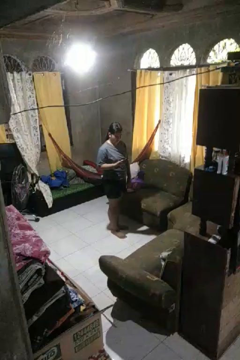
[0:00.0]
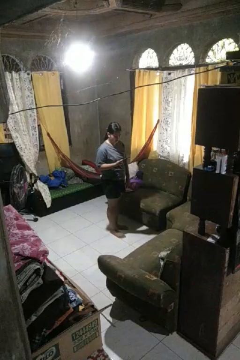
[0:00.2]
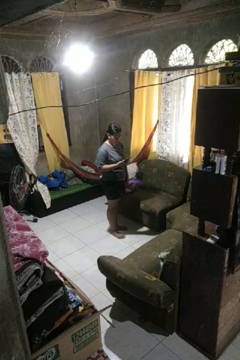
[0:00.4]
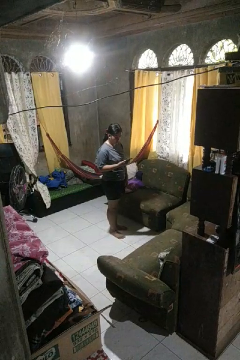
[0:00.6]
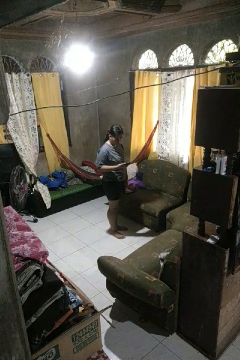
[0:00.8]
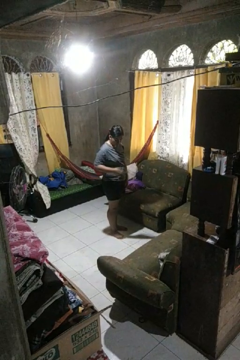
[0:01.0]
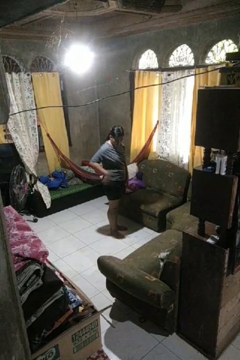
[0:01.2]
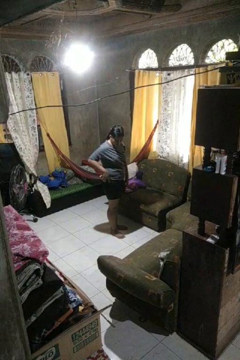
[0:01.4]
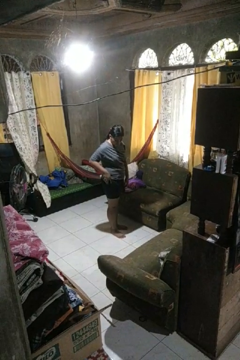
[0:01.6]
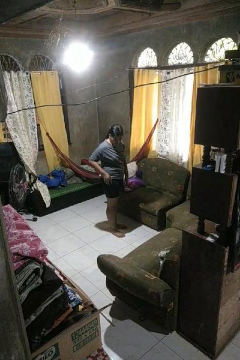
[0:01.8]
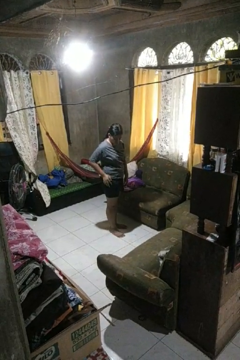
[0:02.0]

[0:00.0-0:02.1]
person puts phone into pocket

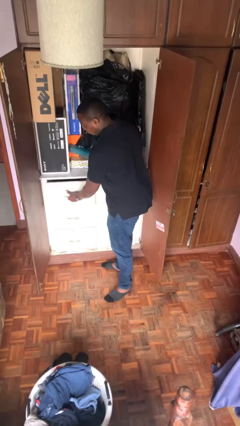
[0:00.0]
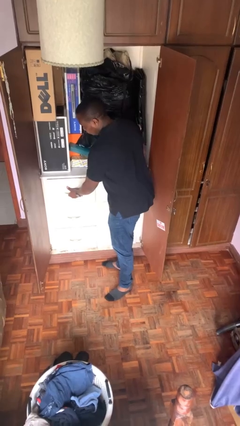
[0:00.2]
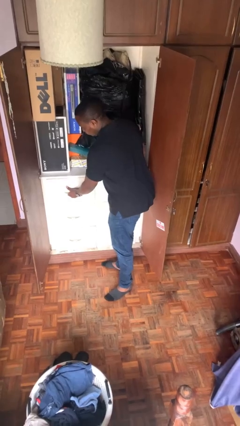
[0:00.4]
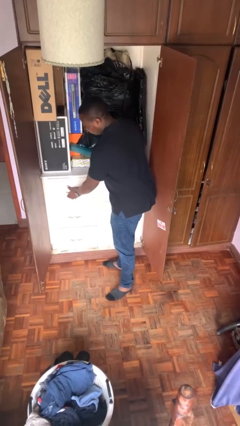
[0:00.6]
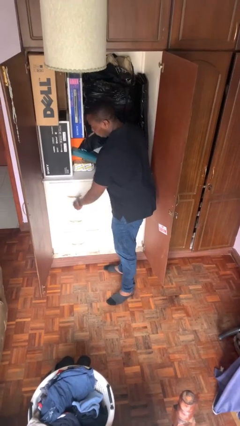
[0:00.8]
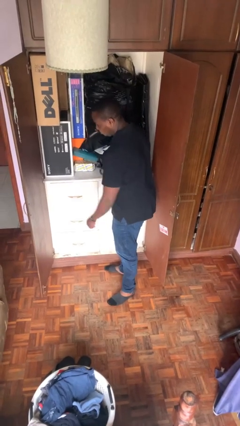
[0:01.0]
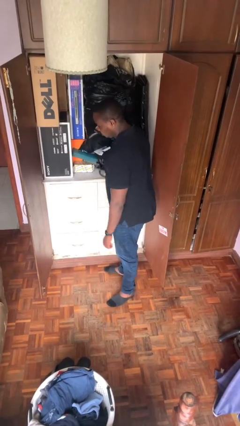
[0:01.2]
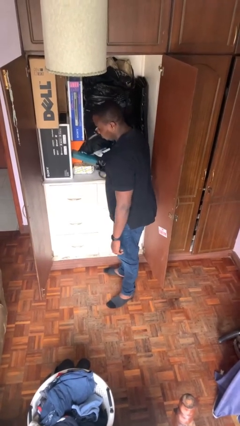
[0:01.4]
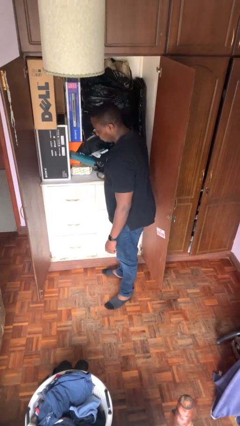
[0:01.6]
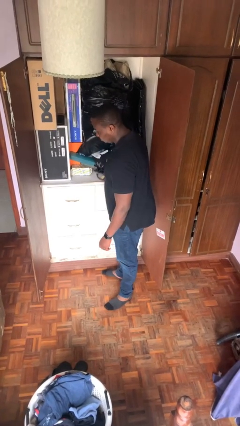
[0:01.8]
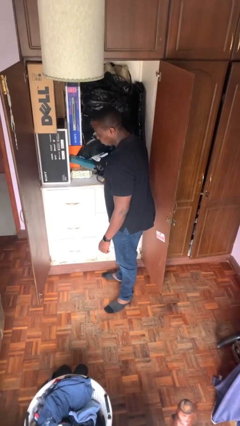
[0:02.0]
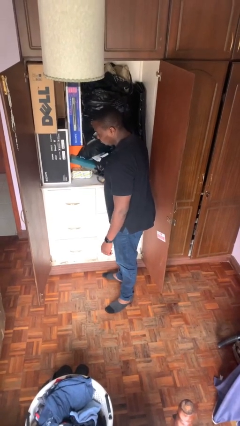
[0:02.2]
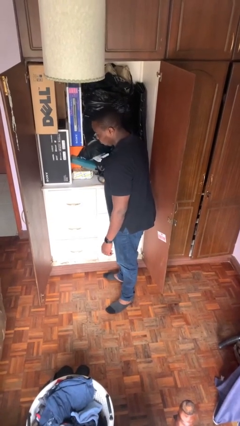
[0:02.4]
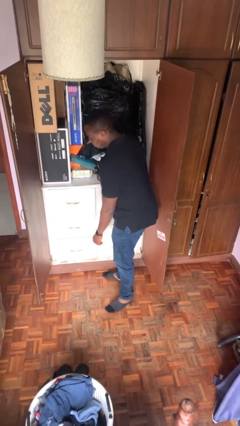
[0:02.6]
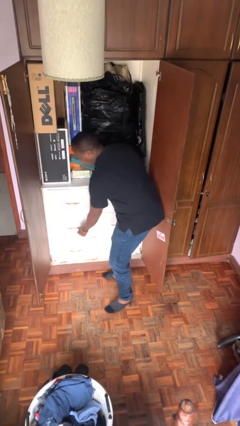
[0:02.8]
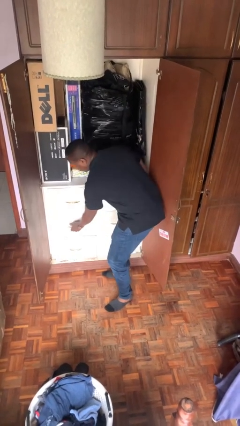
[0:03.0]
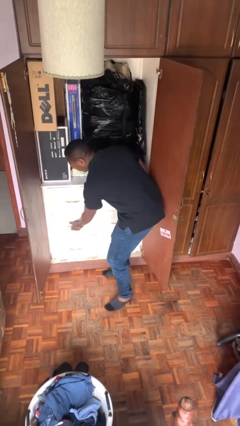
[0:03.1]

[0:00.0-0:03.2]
person closes dresser drawer

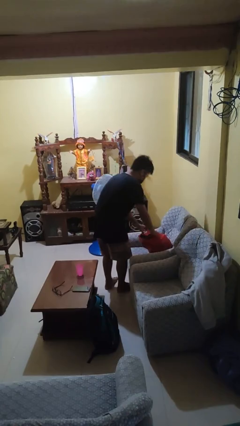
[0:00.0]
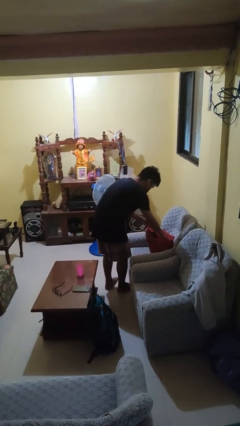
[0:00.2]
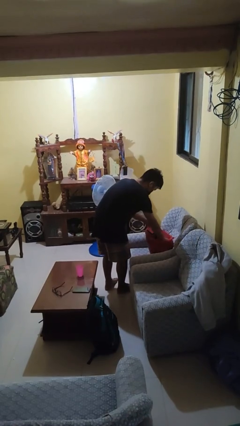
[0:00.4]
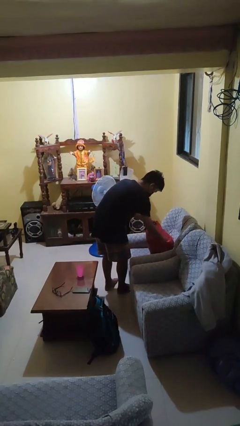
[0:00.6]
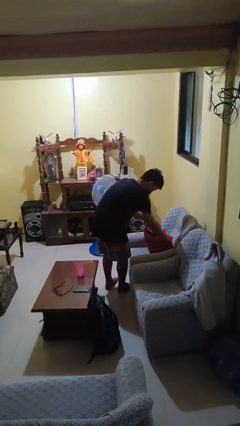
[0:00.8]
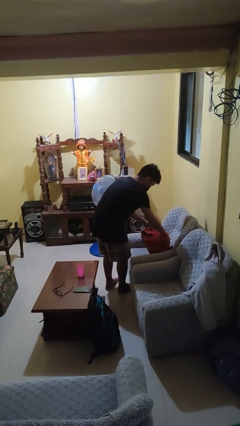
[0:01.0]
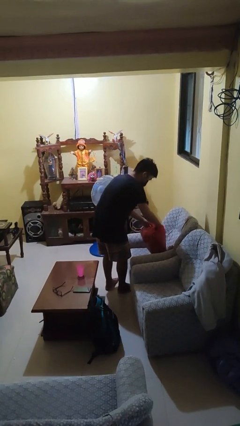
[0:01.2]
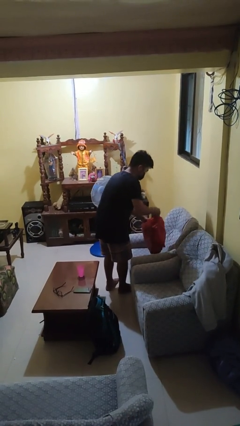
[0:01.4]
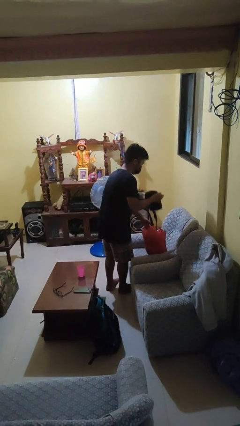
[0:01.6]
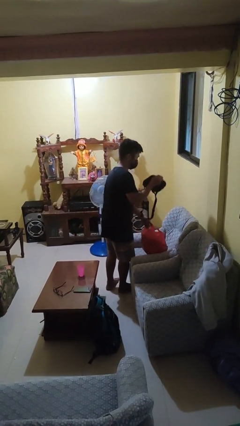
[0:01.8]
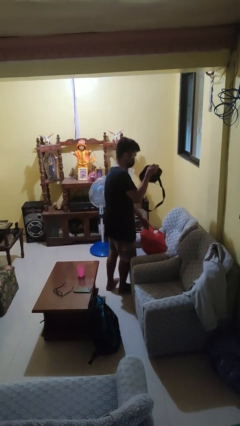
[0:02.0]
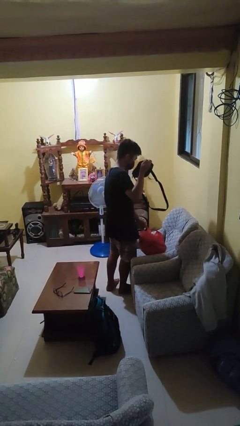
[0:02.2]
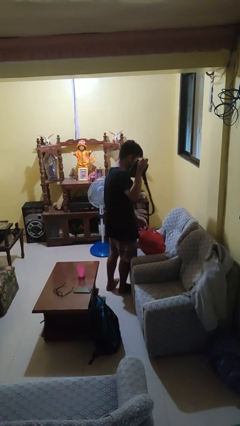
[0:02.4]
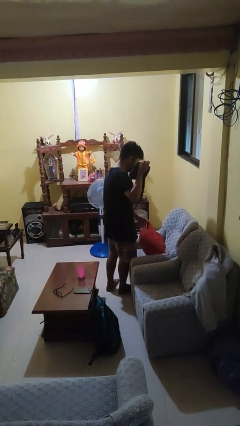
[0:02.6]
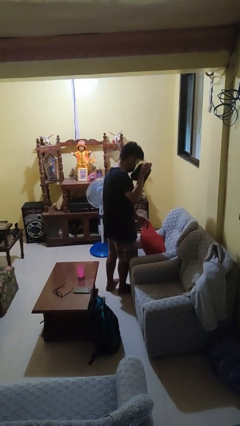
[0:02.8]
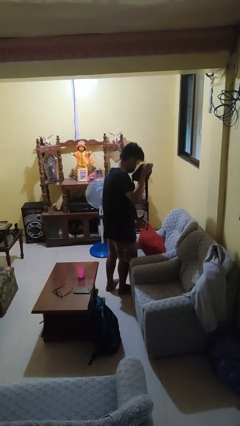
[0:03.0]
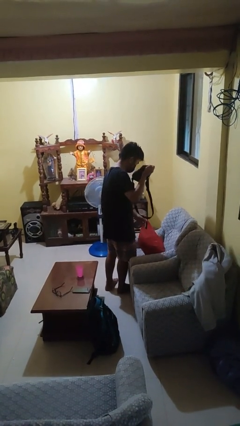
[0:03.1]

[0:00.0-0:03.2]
person takes object from bag

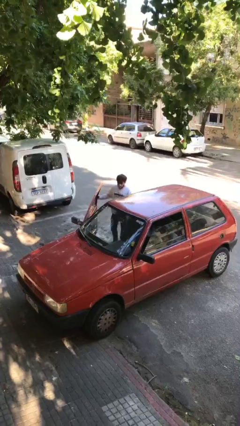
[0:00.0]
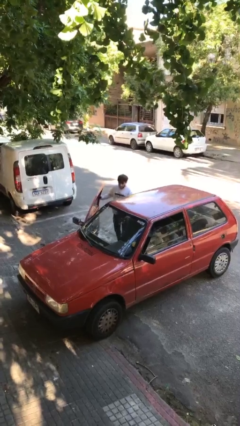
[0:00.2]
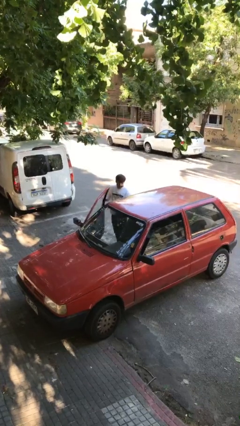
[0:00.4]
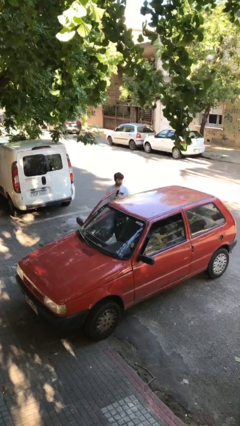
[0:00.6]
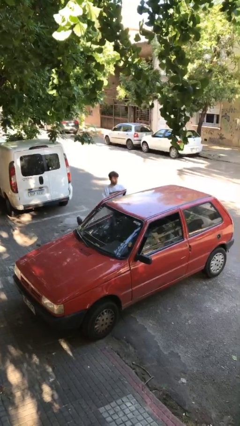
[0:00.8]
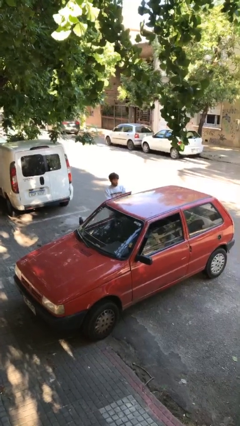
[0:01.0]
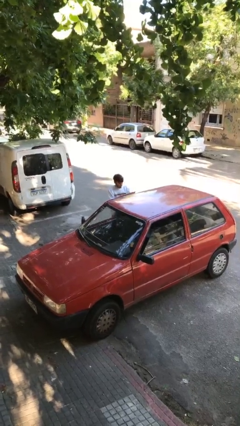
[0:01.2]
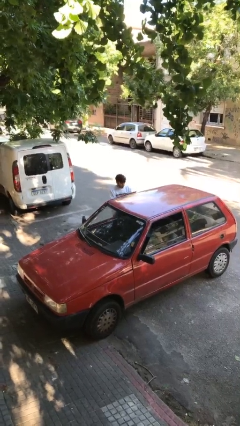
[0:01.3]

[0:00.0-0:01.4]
person closes car door

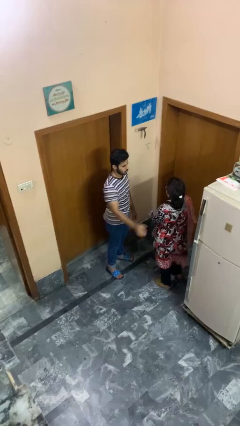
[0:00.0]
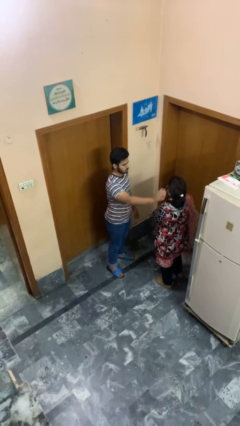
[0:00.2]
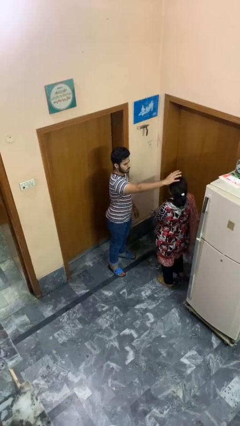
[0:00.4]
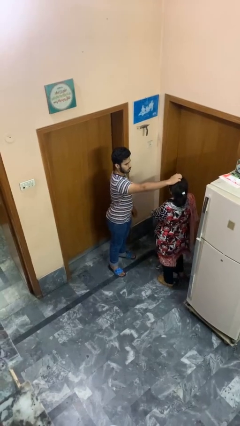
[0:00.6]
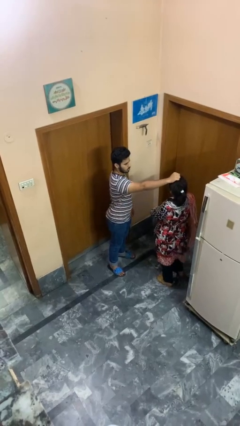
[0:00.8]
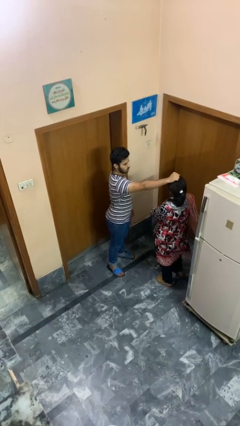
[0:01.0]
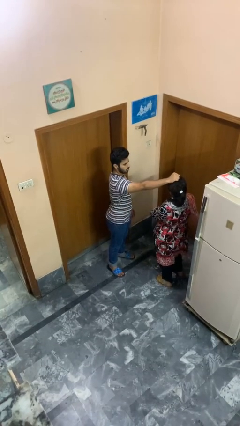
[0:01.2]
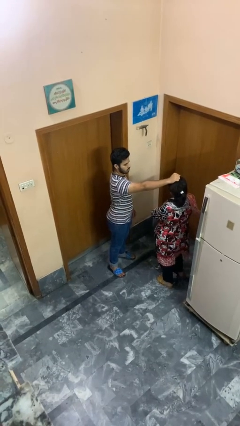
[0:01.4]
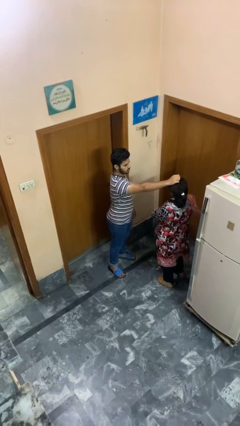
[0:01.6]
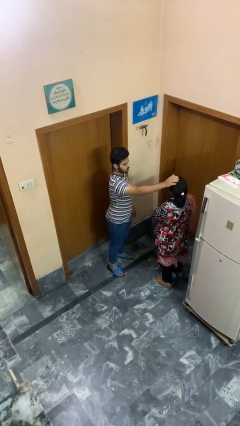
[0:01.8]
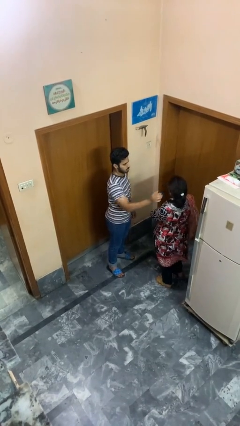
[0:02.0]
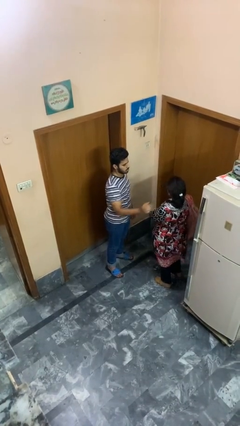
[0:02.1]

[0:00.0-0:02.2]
person grabs person by hair

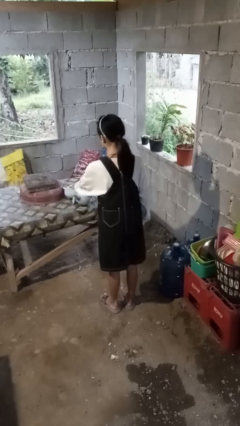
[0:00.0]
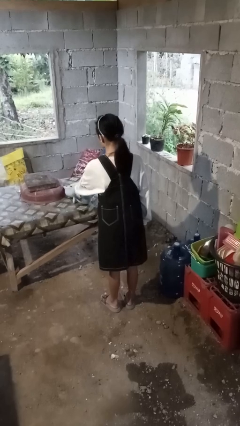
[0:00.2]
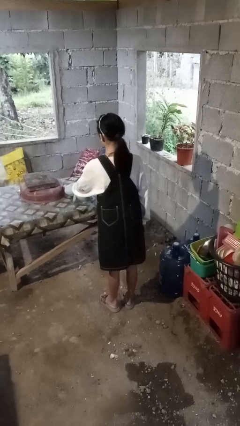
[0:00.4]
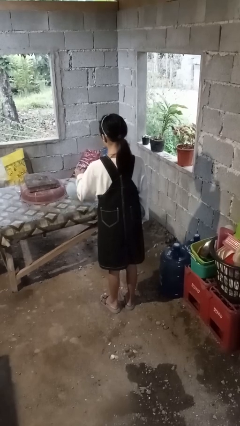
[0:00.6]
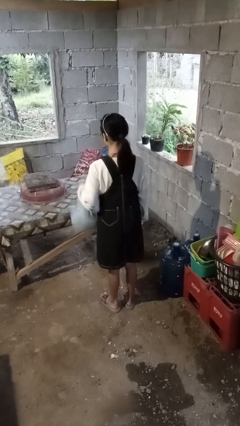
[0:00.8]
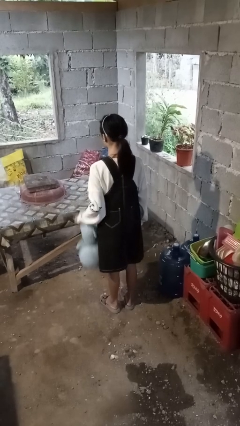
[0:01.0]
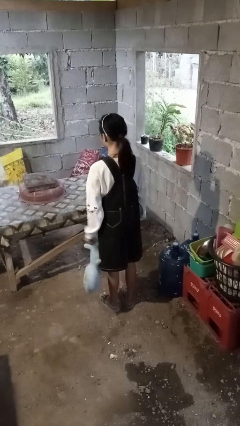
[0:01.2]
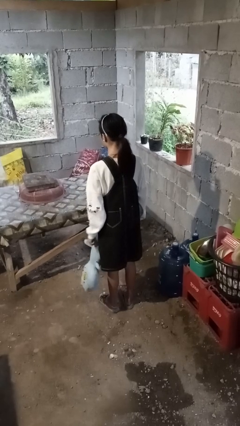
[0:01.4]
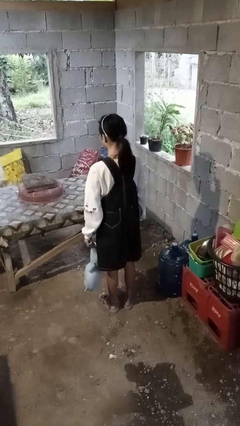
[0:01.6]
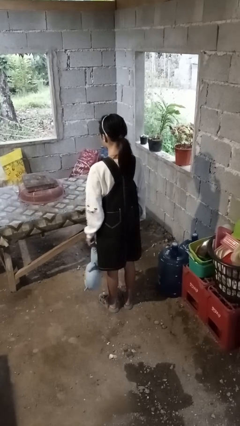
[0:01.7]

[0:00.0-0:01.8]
person picks up object from table

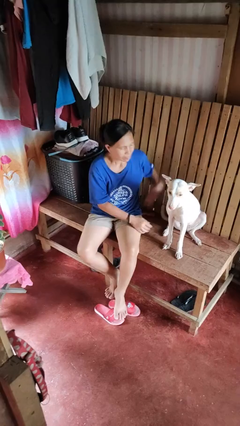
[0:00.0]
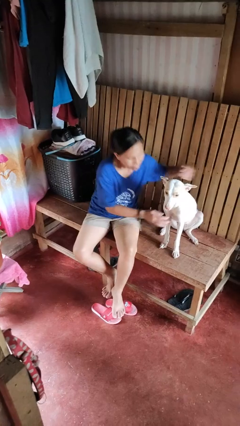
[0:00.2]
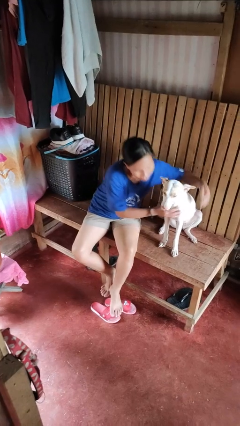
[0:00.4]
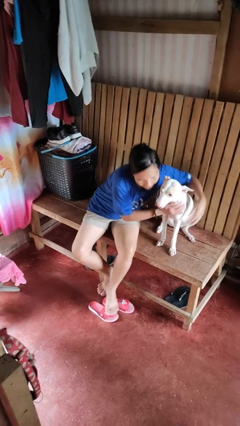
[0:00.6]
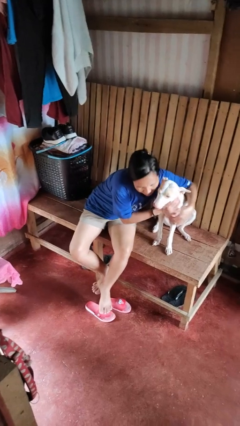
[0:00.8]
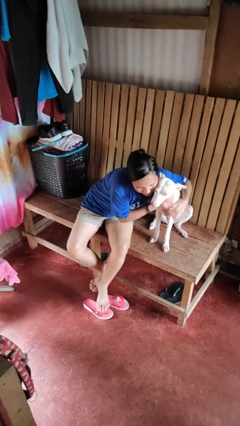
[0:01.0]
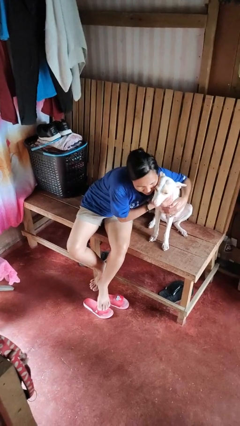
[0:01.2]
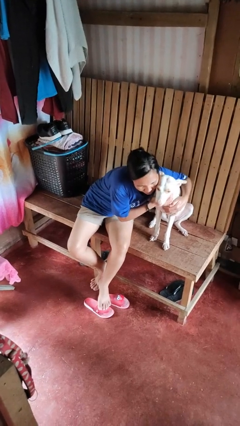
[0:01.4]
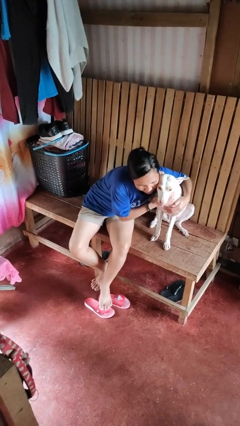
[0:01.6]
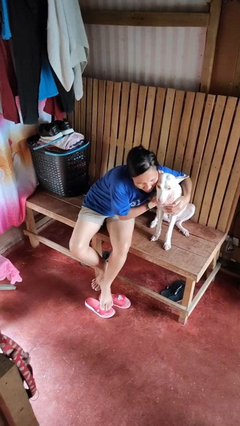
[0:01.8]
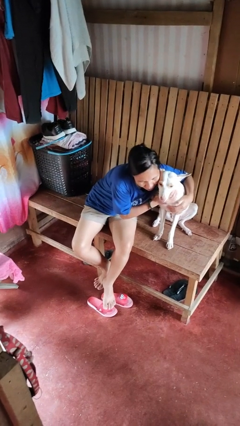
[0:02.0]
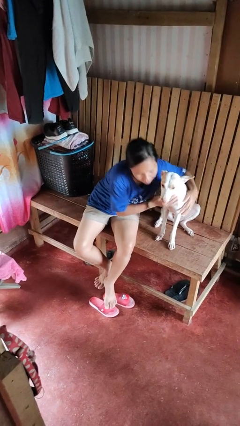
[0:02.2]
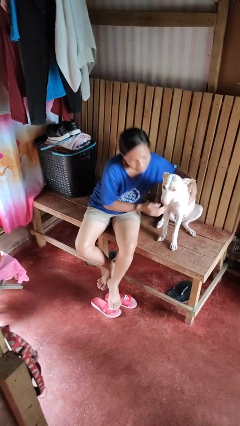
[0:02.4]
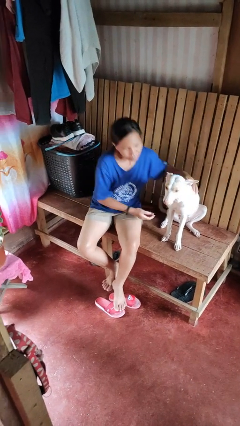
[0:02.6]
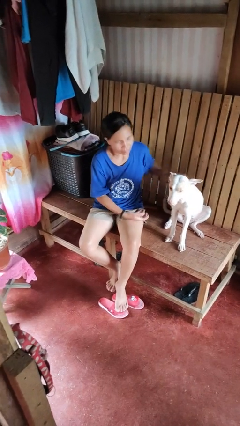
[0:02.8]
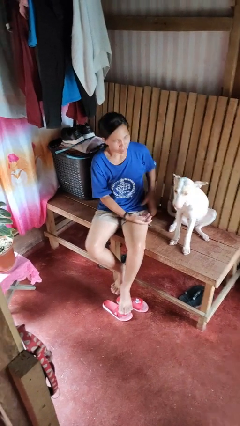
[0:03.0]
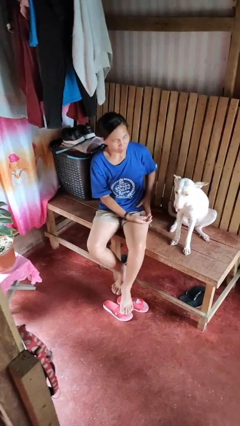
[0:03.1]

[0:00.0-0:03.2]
person hugs dog

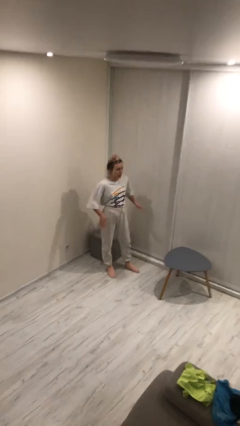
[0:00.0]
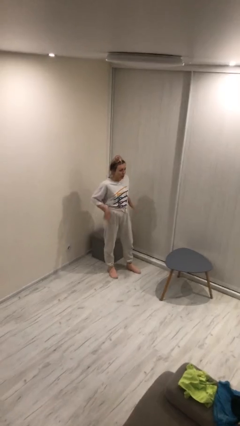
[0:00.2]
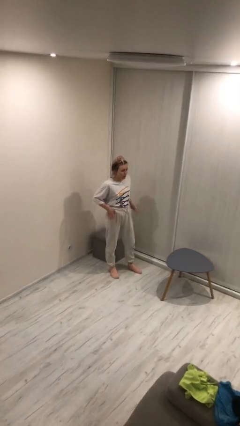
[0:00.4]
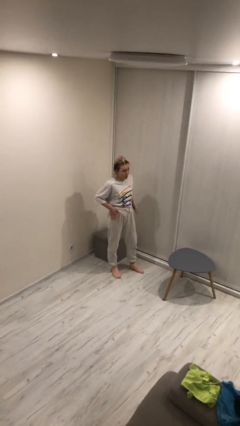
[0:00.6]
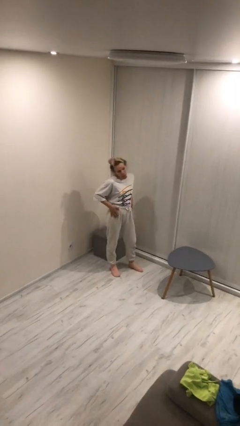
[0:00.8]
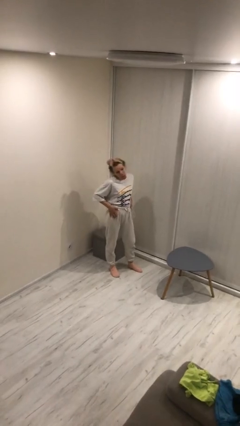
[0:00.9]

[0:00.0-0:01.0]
person slaps hands on thighs
